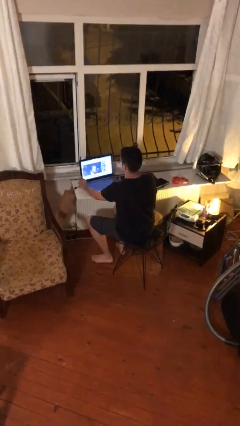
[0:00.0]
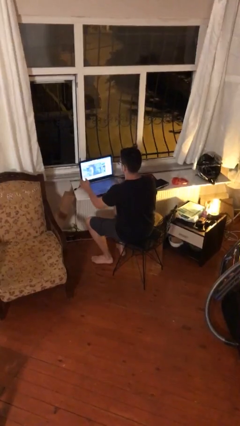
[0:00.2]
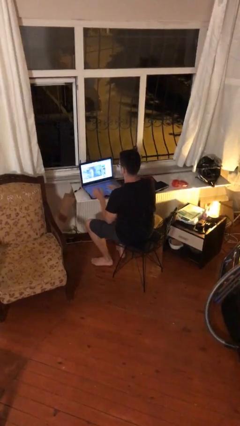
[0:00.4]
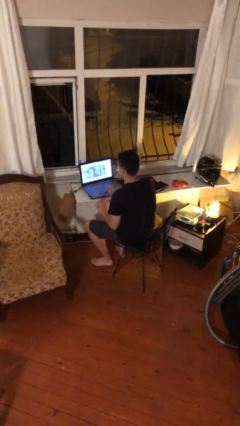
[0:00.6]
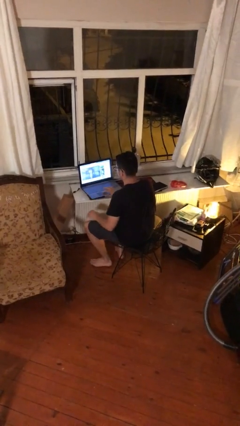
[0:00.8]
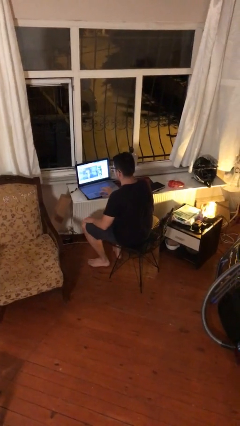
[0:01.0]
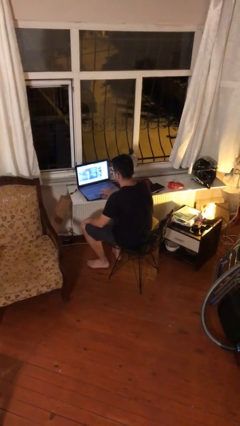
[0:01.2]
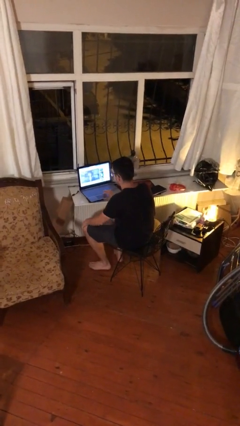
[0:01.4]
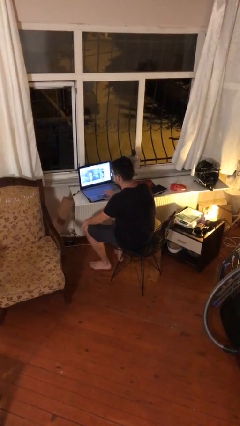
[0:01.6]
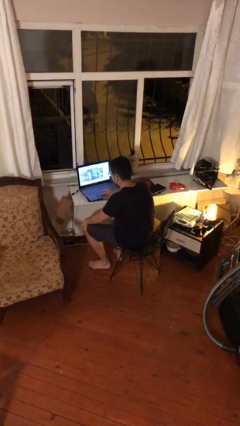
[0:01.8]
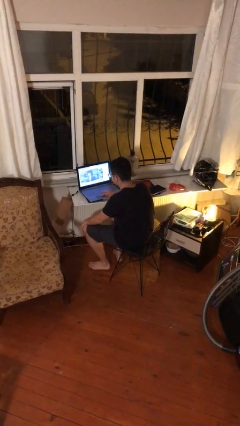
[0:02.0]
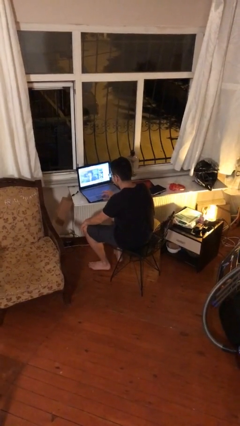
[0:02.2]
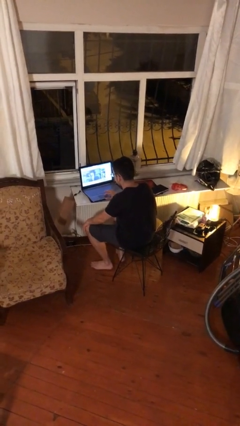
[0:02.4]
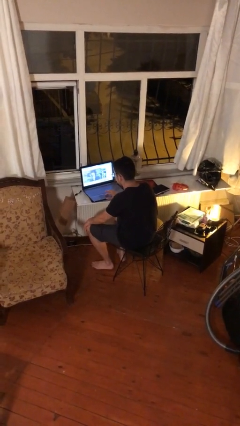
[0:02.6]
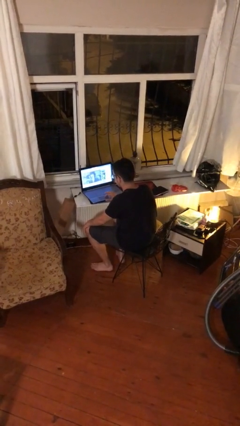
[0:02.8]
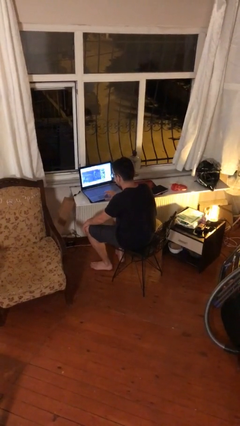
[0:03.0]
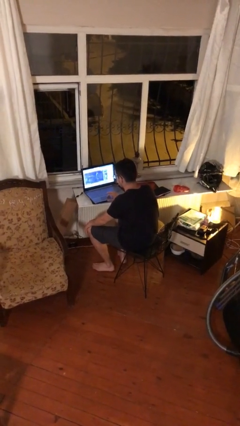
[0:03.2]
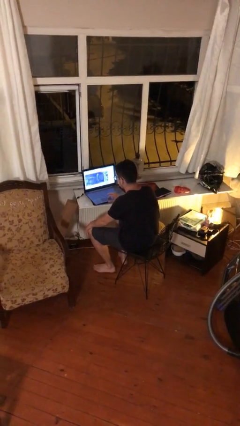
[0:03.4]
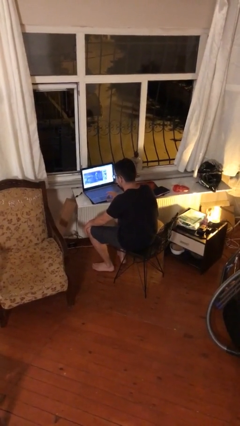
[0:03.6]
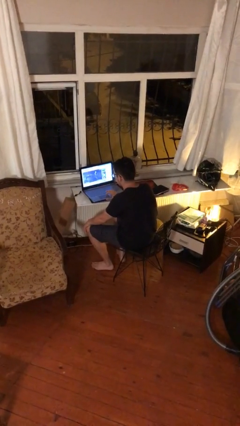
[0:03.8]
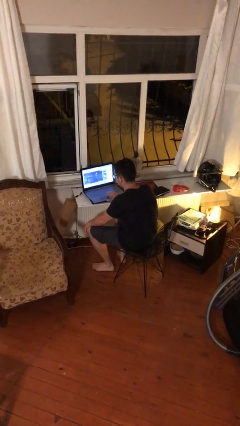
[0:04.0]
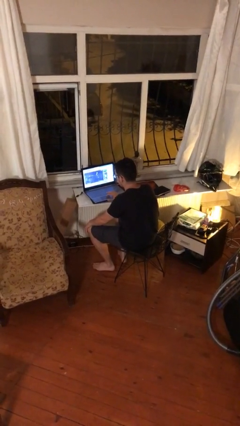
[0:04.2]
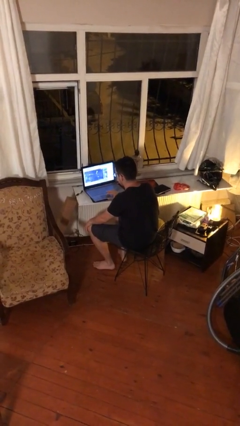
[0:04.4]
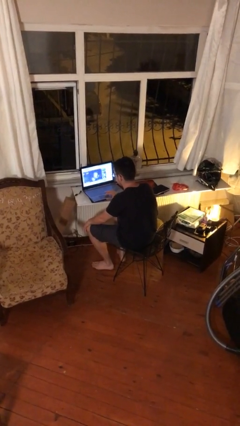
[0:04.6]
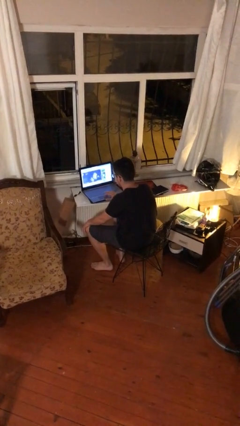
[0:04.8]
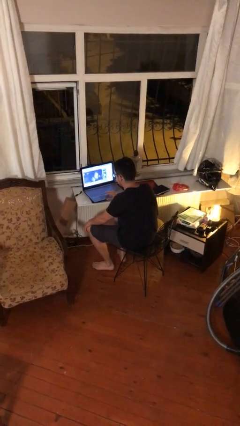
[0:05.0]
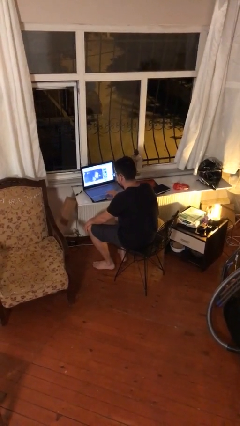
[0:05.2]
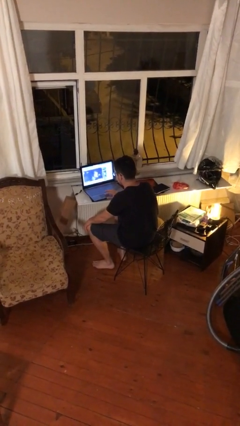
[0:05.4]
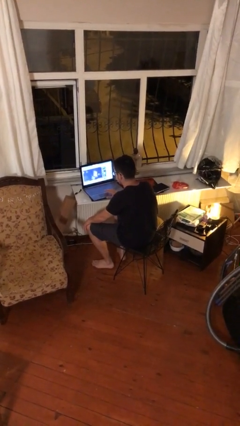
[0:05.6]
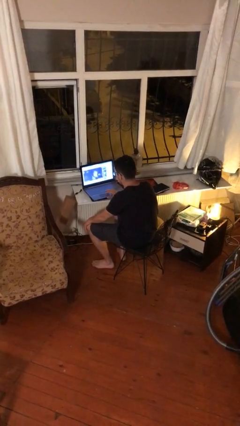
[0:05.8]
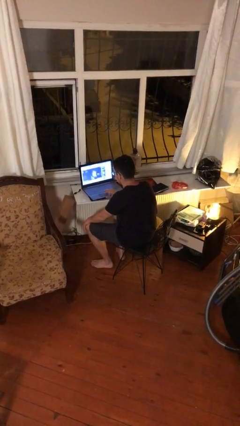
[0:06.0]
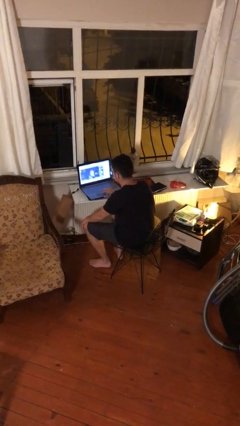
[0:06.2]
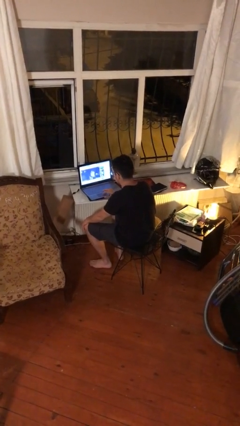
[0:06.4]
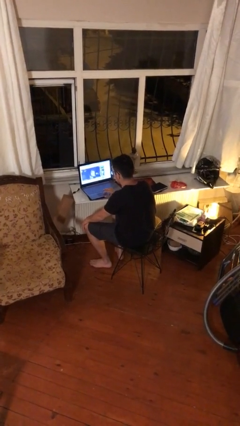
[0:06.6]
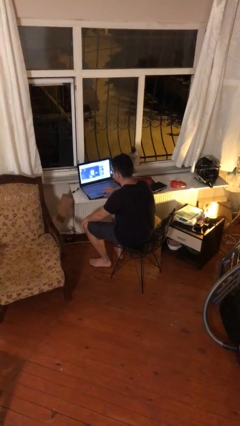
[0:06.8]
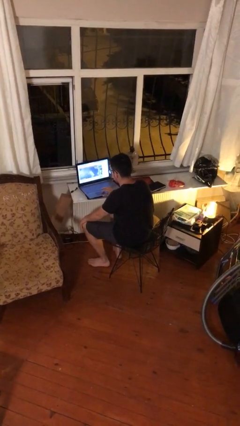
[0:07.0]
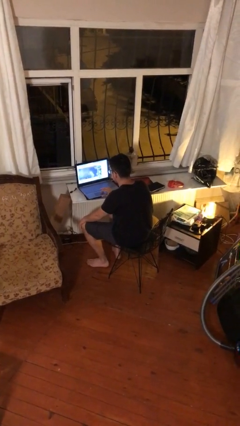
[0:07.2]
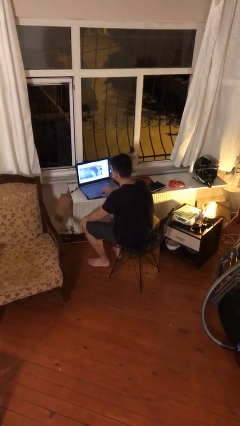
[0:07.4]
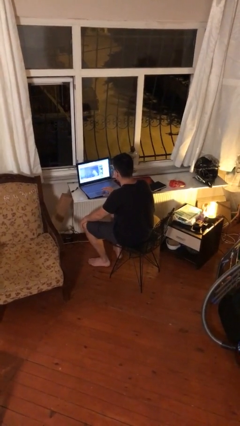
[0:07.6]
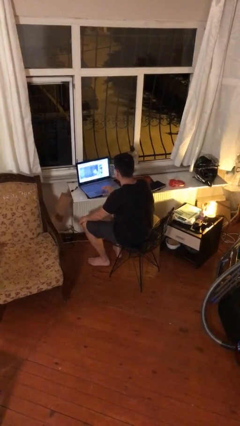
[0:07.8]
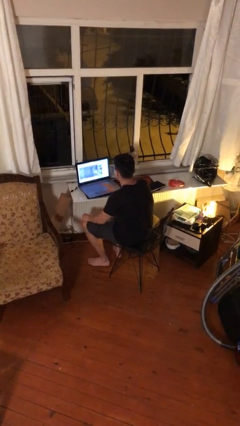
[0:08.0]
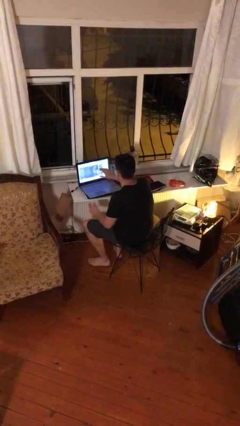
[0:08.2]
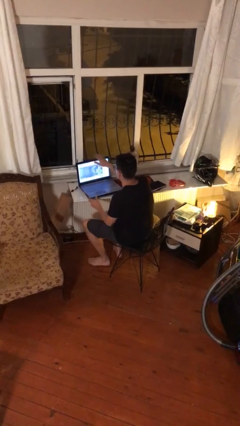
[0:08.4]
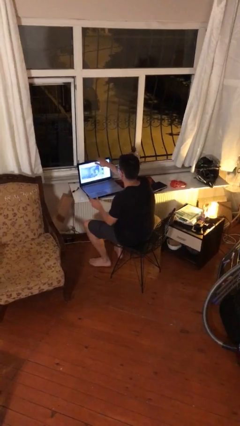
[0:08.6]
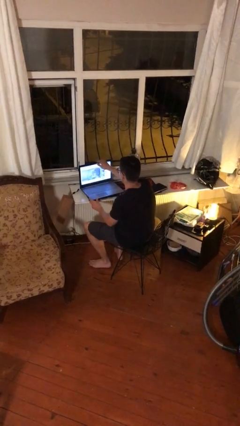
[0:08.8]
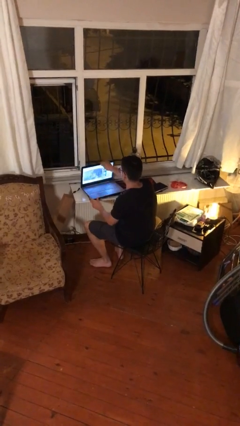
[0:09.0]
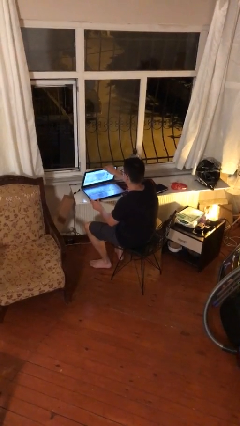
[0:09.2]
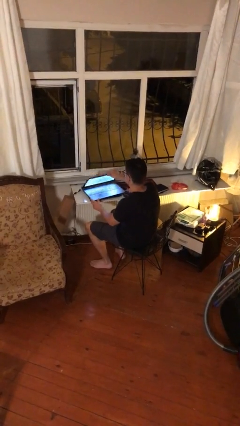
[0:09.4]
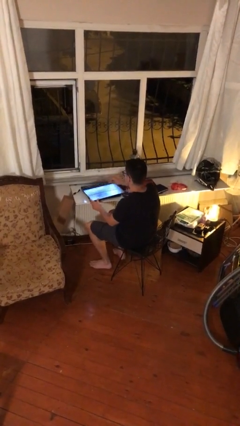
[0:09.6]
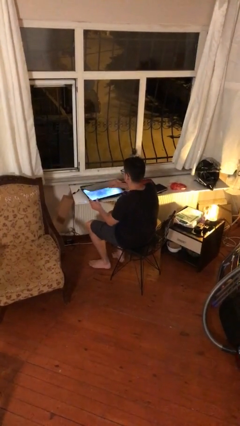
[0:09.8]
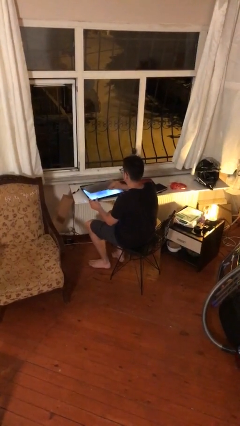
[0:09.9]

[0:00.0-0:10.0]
person interacts with laptop

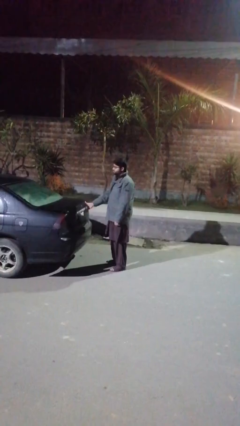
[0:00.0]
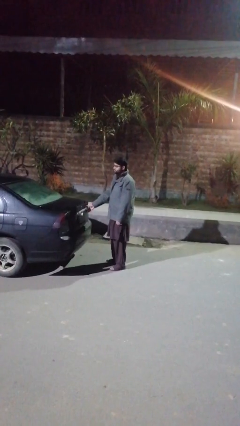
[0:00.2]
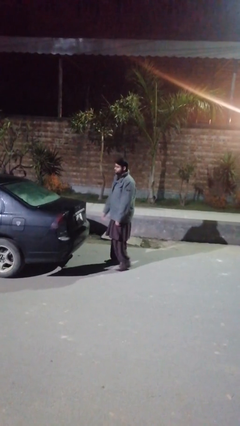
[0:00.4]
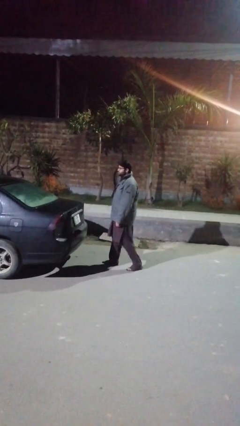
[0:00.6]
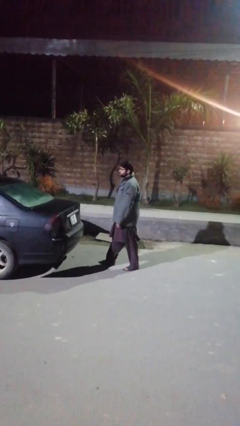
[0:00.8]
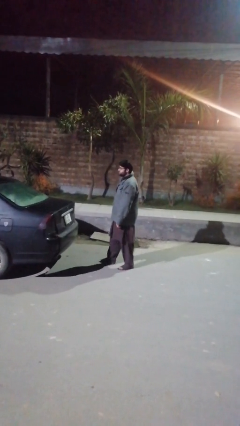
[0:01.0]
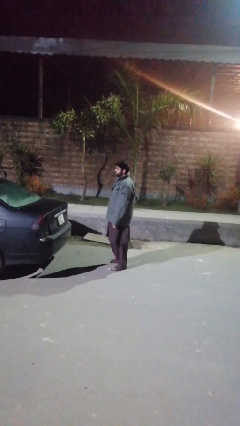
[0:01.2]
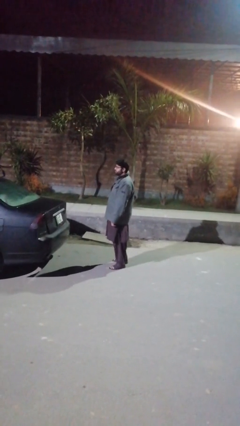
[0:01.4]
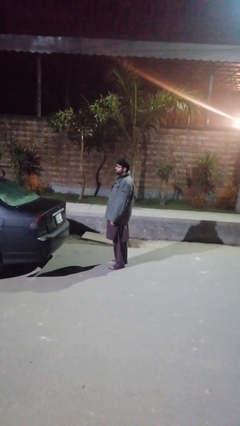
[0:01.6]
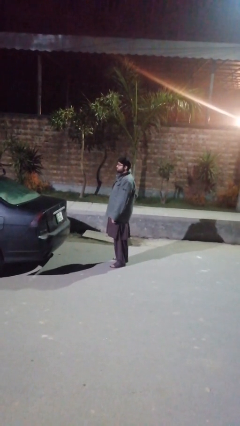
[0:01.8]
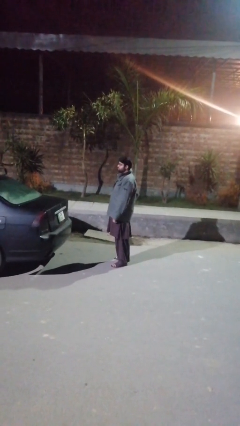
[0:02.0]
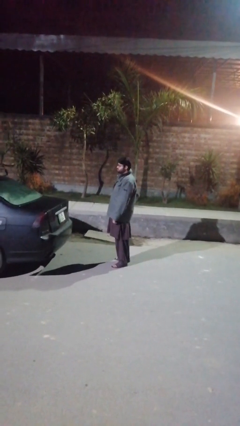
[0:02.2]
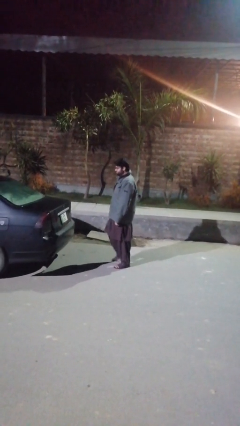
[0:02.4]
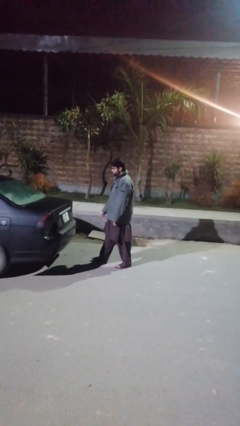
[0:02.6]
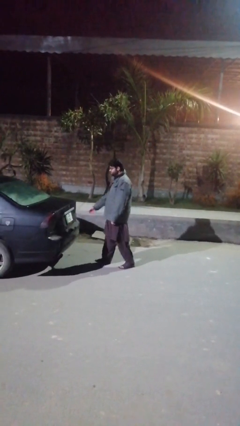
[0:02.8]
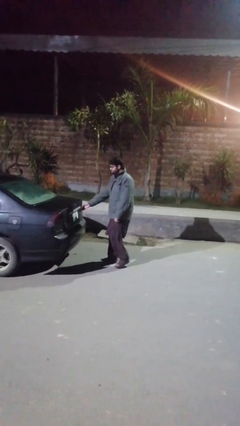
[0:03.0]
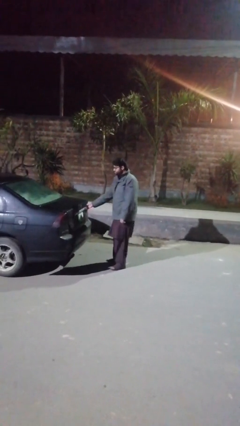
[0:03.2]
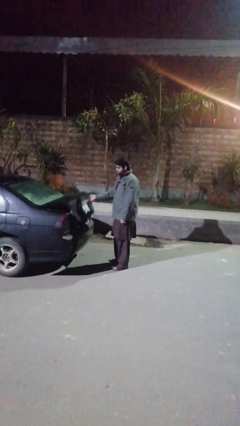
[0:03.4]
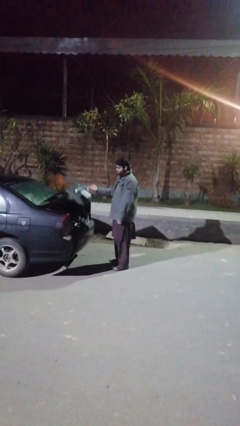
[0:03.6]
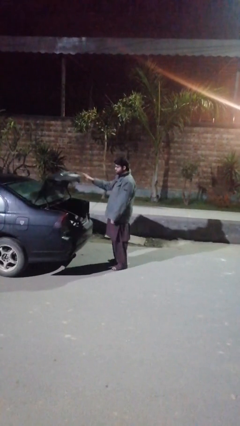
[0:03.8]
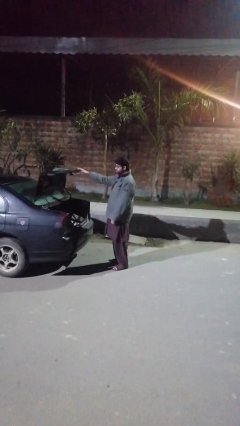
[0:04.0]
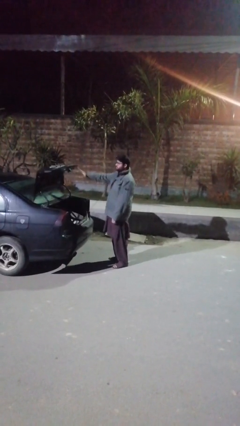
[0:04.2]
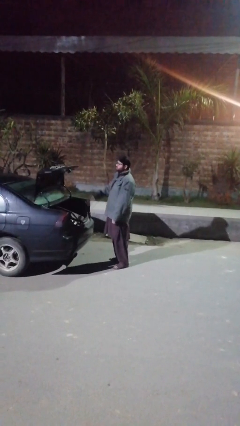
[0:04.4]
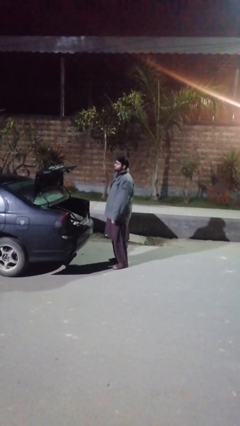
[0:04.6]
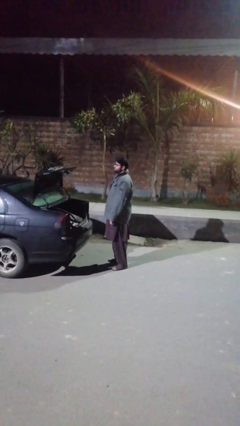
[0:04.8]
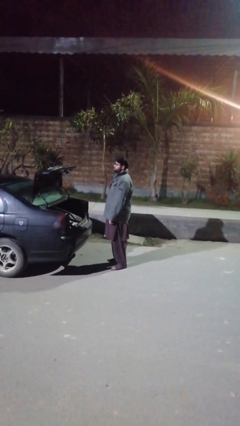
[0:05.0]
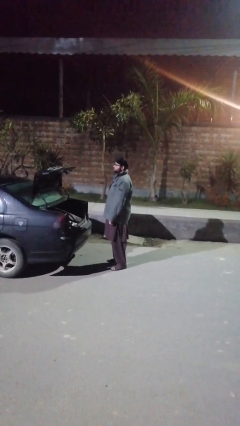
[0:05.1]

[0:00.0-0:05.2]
person closes car trunk

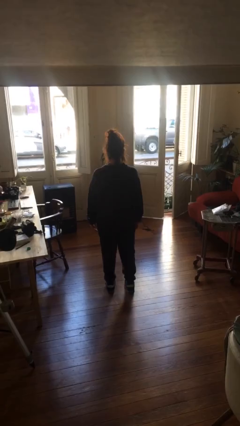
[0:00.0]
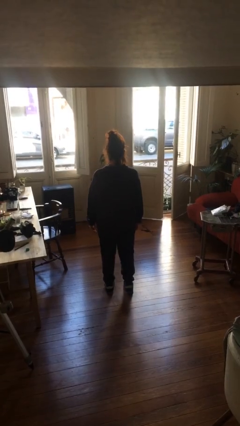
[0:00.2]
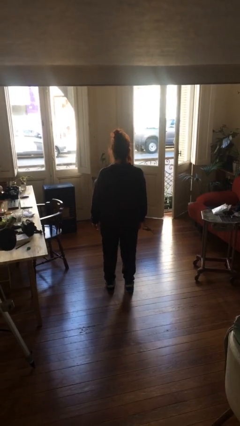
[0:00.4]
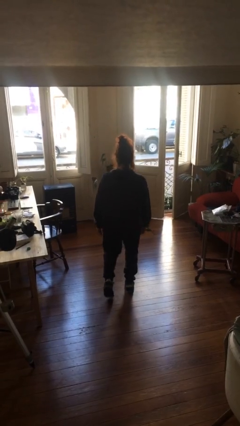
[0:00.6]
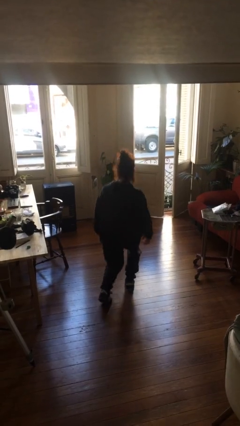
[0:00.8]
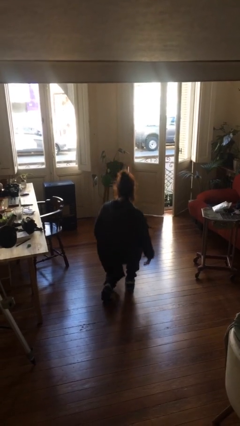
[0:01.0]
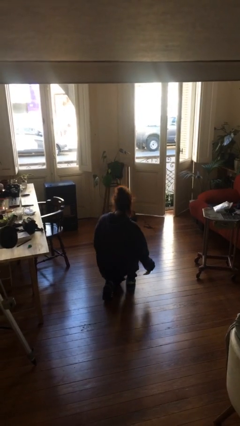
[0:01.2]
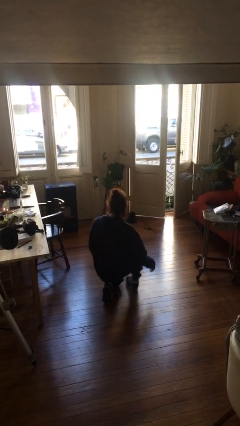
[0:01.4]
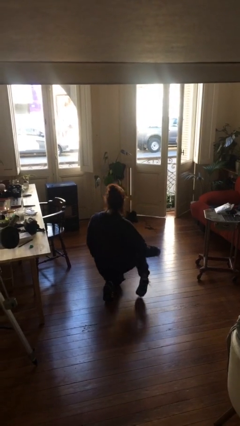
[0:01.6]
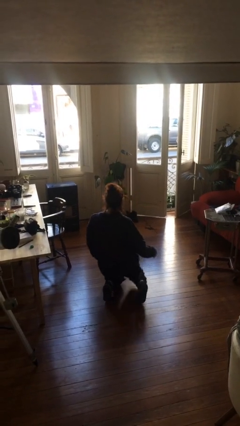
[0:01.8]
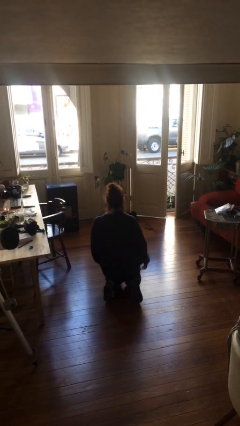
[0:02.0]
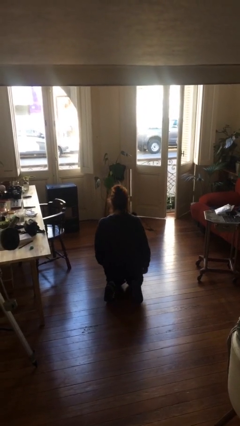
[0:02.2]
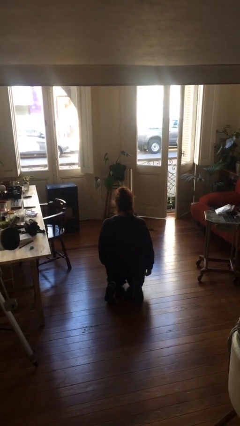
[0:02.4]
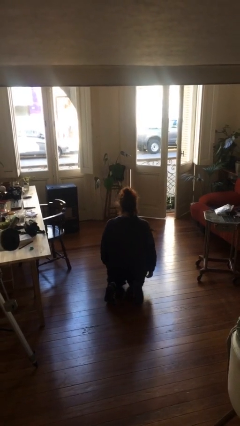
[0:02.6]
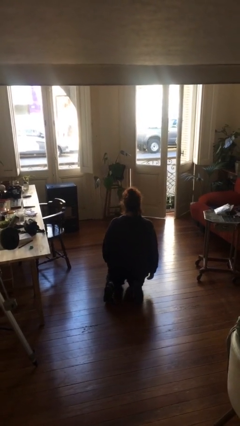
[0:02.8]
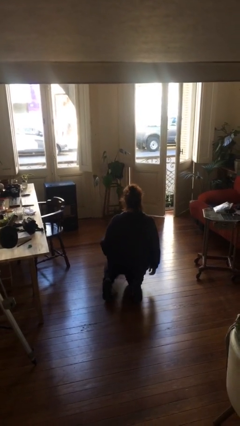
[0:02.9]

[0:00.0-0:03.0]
person kneels
